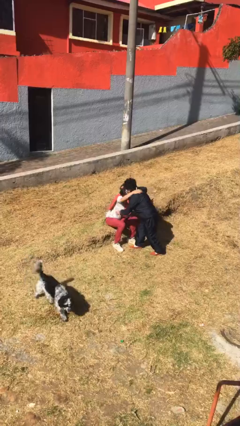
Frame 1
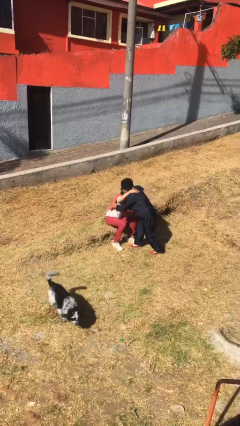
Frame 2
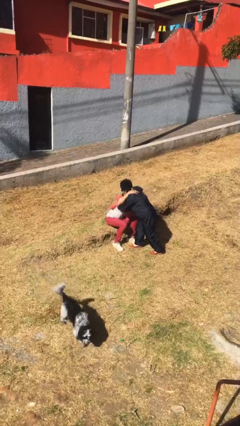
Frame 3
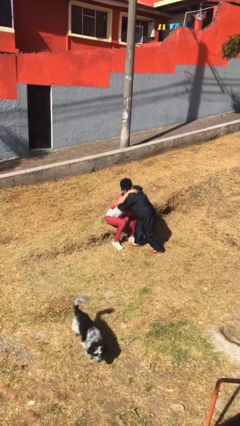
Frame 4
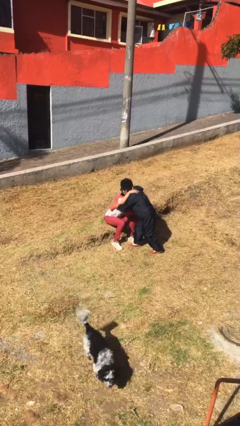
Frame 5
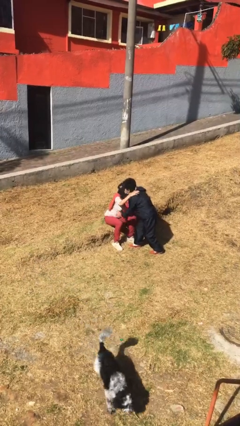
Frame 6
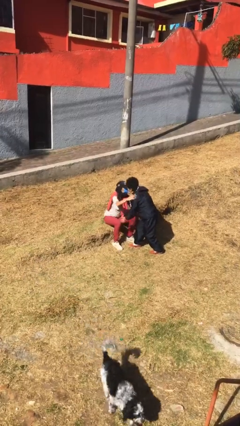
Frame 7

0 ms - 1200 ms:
person embraces person

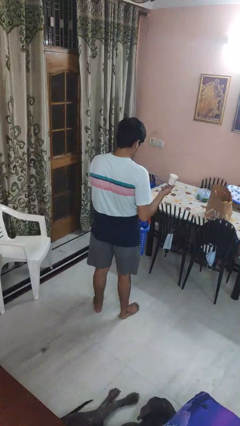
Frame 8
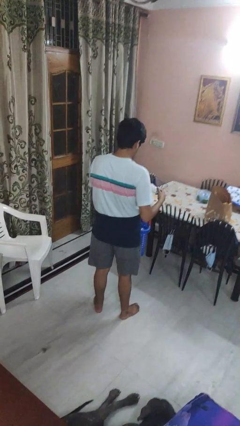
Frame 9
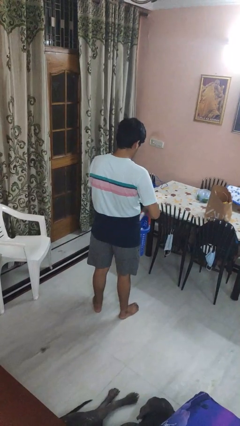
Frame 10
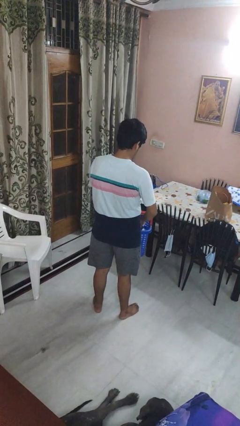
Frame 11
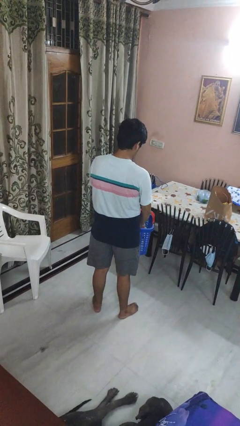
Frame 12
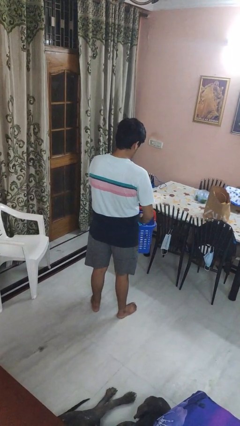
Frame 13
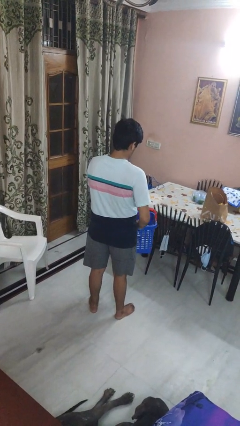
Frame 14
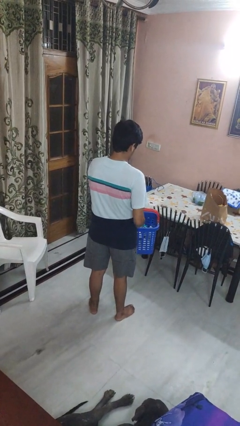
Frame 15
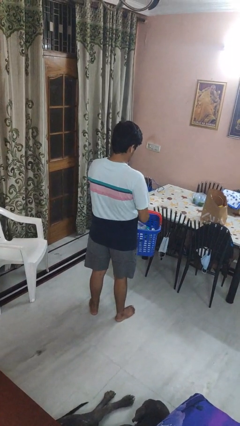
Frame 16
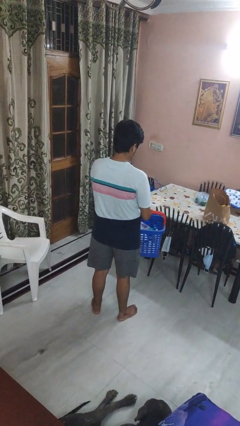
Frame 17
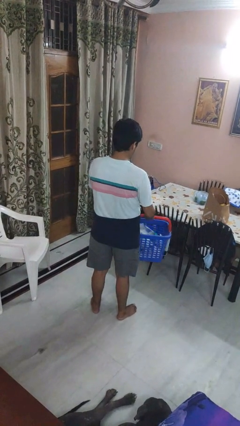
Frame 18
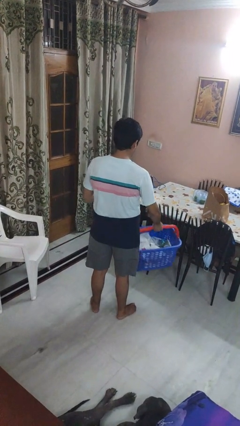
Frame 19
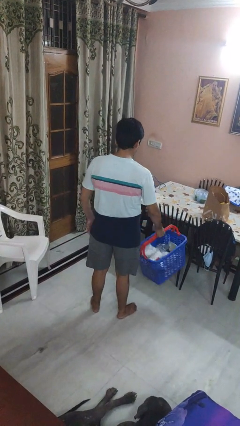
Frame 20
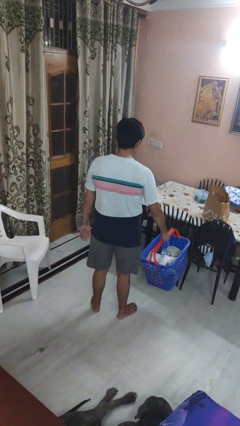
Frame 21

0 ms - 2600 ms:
person puts object into basket

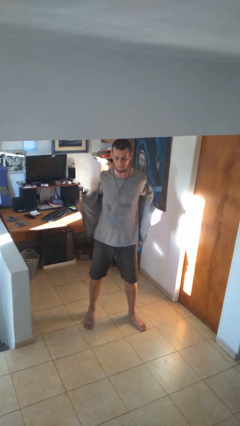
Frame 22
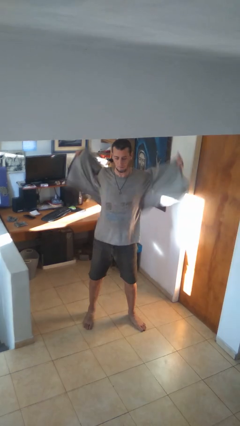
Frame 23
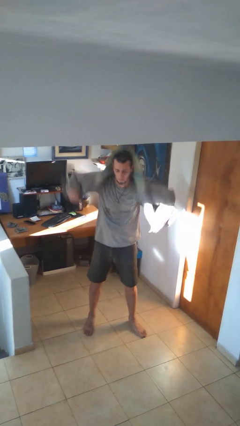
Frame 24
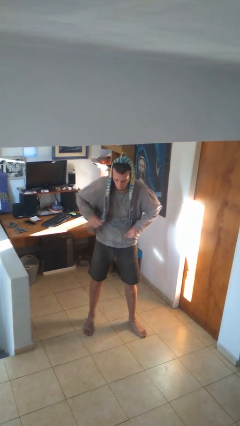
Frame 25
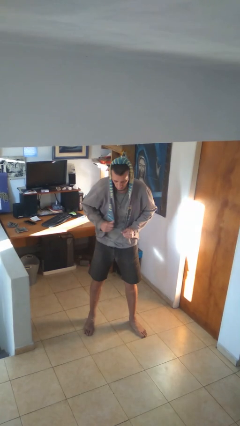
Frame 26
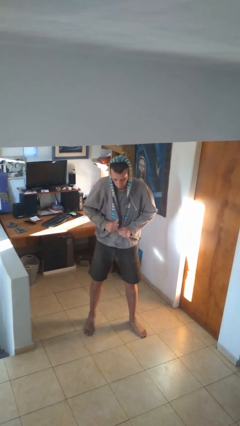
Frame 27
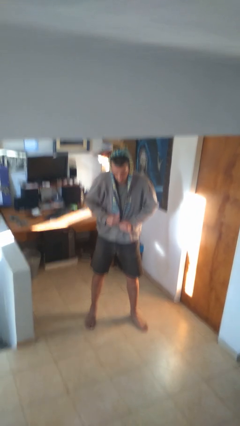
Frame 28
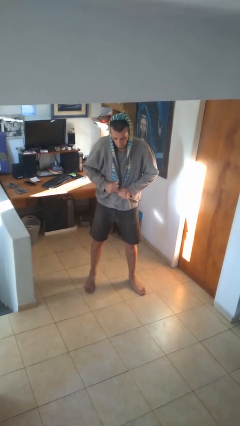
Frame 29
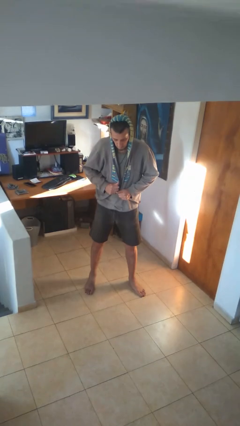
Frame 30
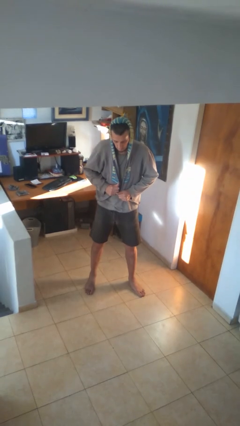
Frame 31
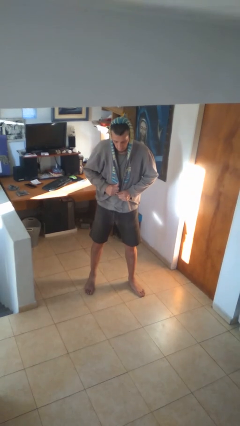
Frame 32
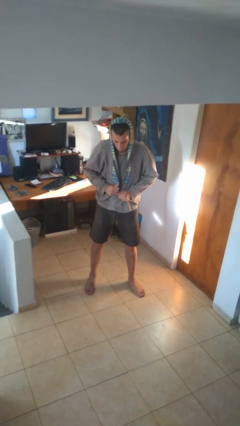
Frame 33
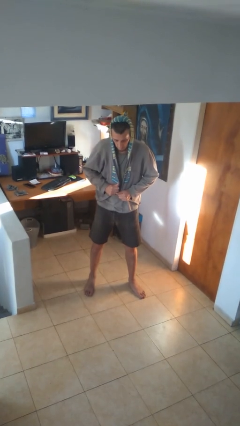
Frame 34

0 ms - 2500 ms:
person puts on hoodie

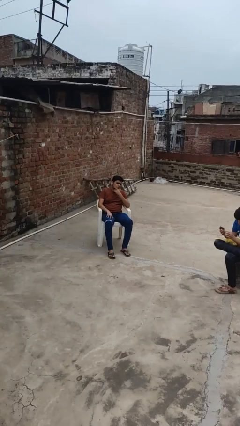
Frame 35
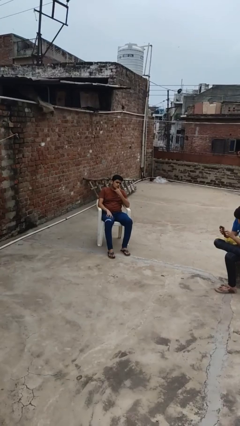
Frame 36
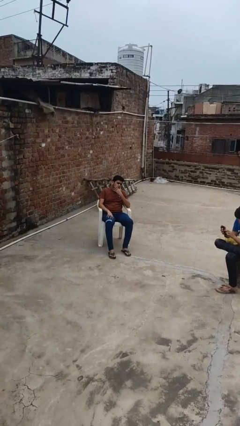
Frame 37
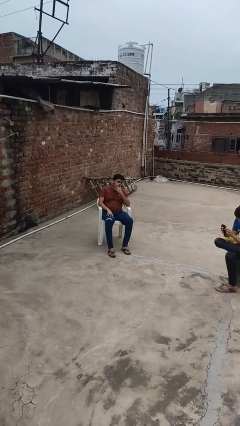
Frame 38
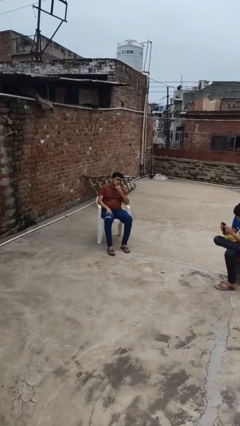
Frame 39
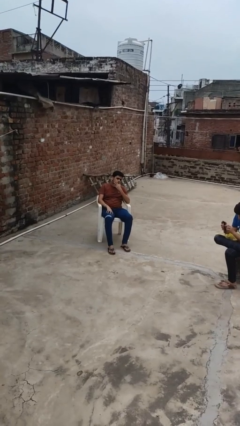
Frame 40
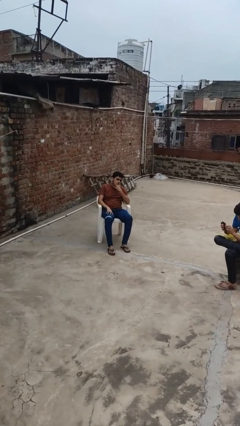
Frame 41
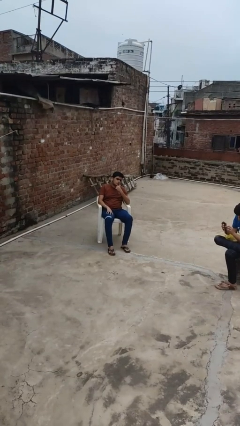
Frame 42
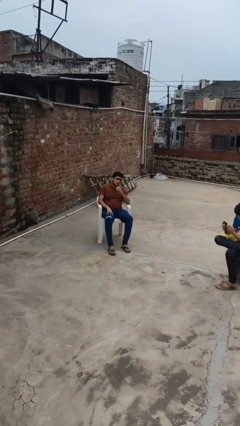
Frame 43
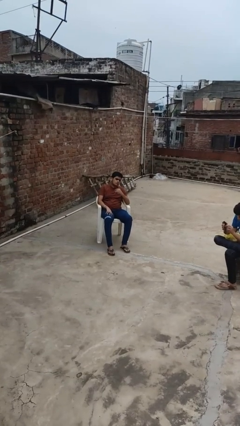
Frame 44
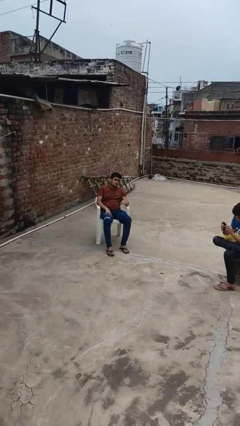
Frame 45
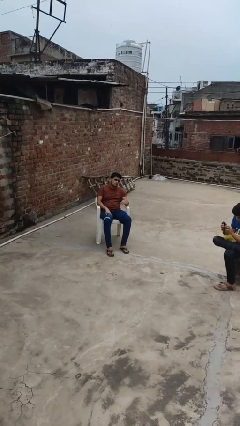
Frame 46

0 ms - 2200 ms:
person strokes chin

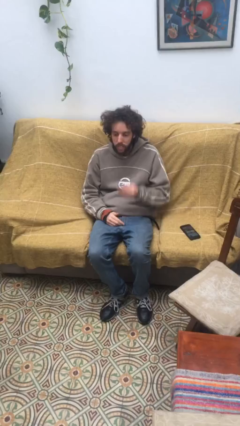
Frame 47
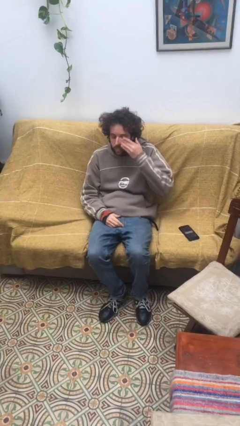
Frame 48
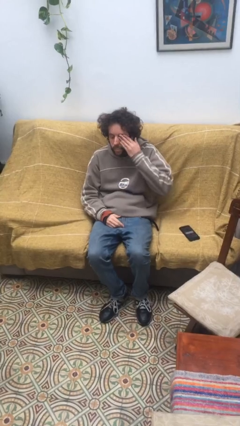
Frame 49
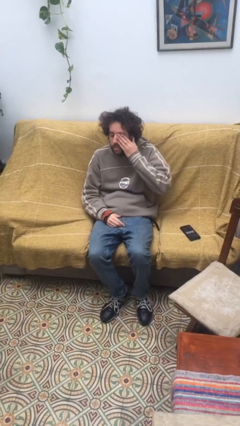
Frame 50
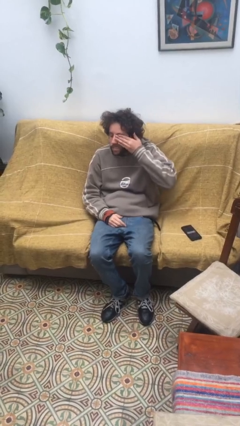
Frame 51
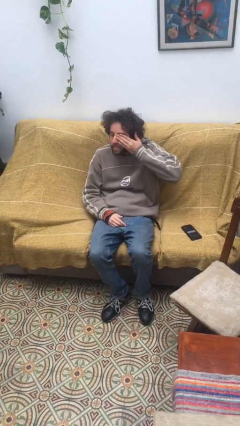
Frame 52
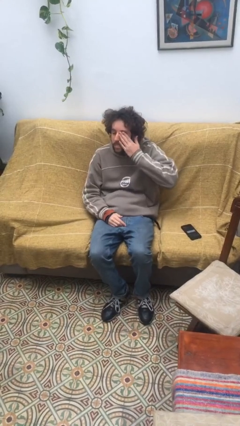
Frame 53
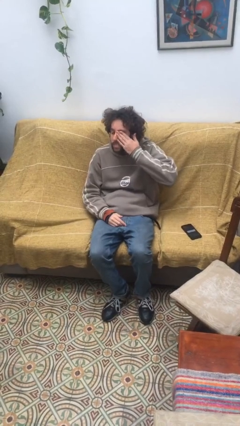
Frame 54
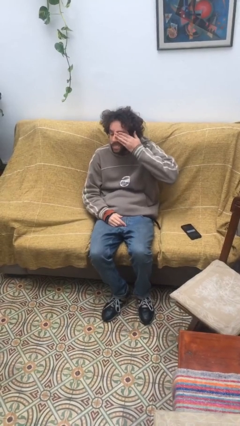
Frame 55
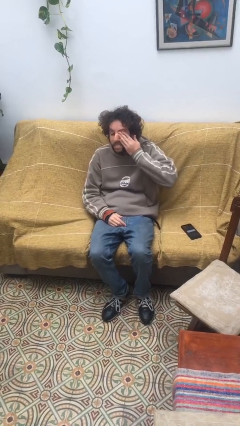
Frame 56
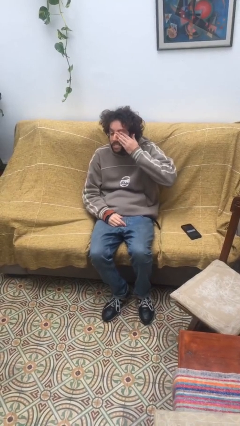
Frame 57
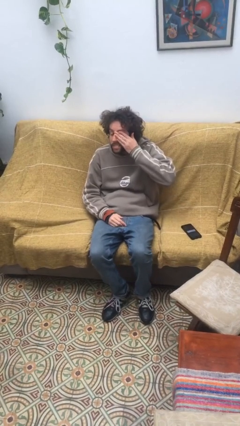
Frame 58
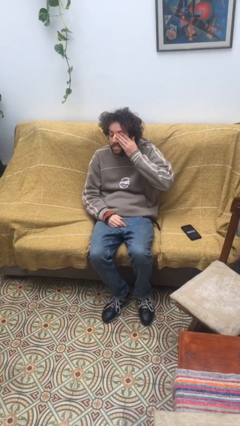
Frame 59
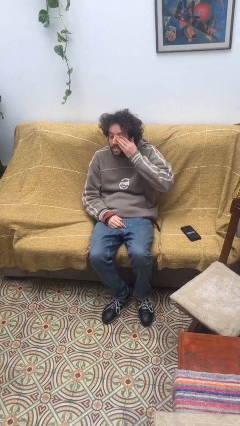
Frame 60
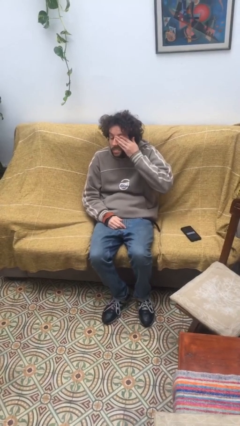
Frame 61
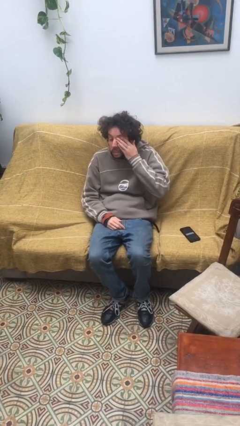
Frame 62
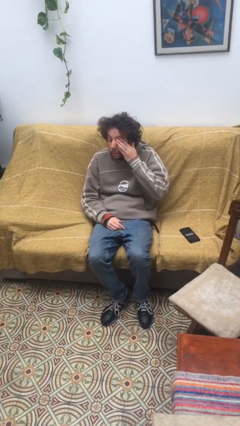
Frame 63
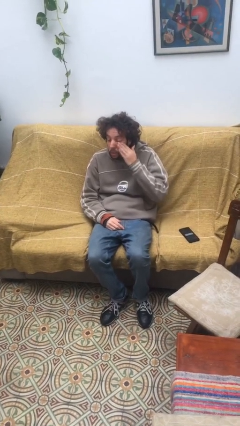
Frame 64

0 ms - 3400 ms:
person rubs eyes

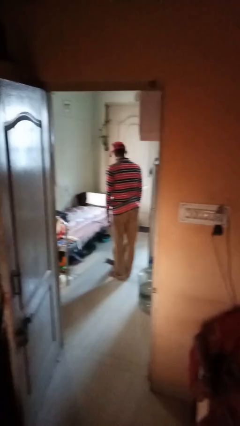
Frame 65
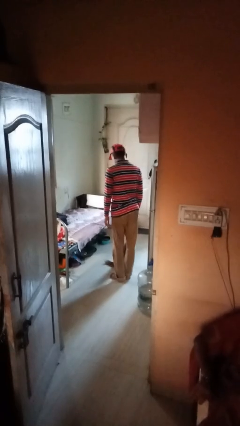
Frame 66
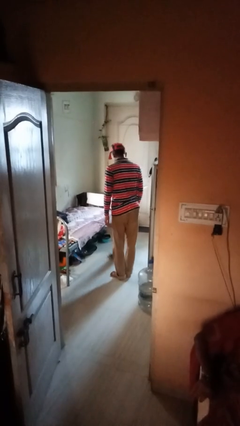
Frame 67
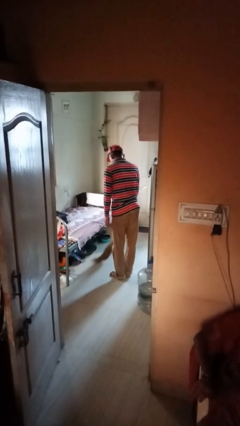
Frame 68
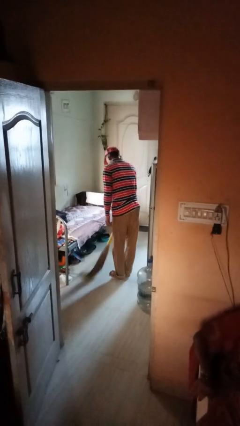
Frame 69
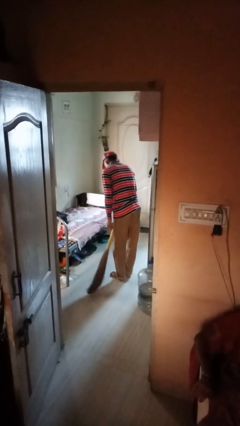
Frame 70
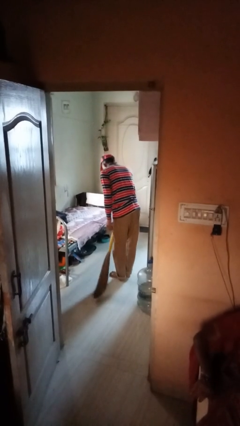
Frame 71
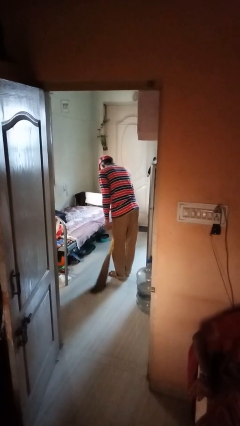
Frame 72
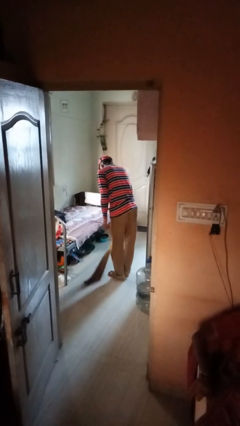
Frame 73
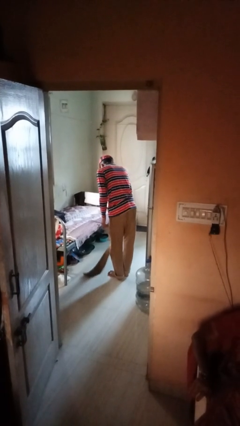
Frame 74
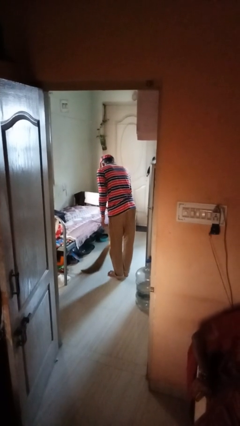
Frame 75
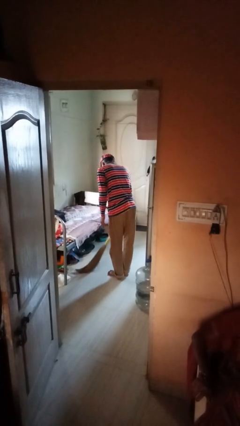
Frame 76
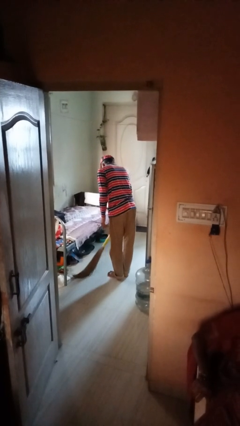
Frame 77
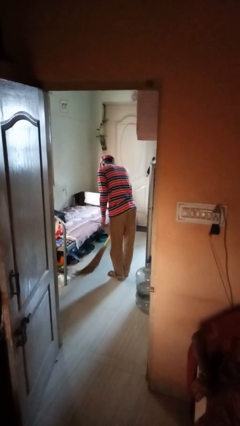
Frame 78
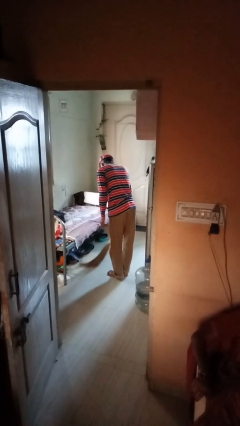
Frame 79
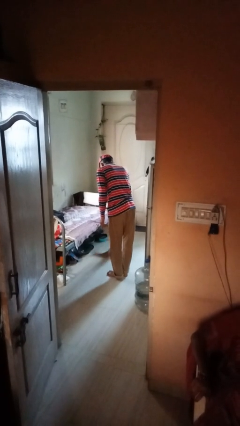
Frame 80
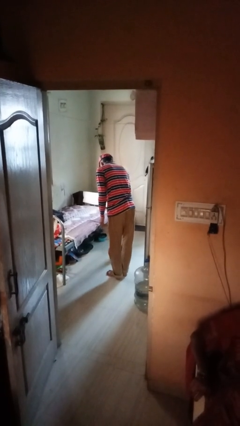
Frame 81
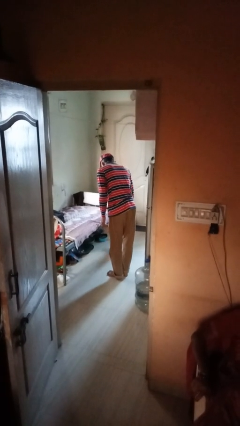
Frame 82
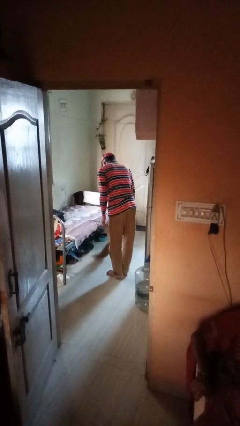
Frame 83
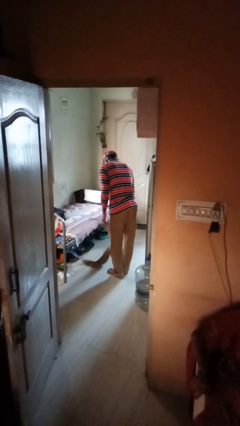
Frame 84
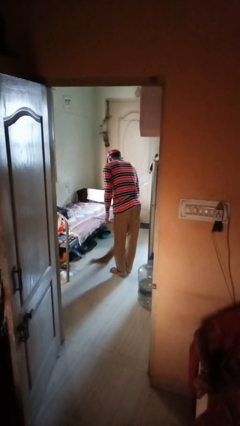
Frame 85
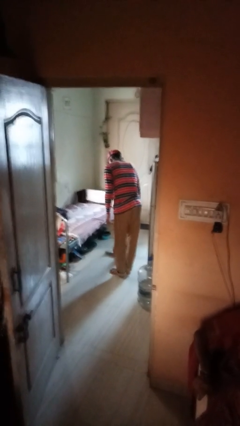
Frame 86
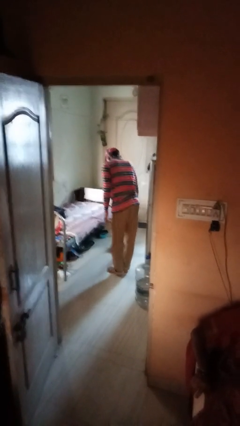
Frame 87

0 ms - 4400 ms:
person sweeps floor

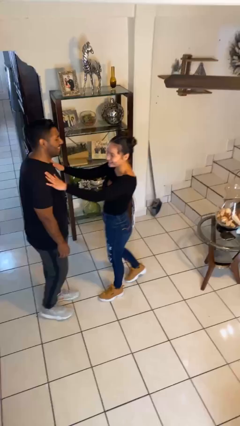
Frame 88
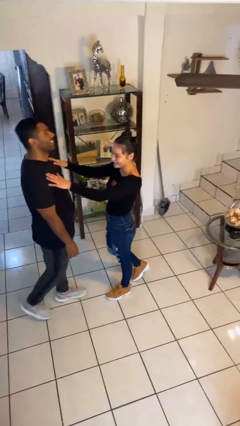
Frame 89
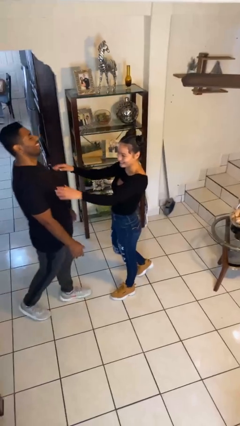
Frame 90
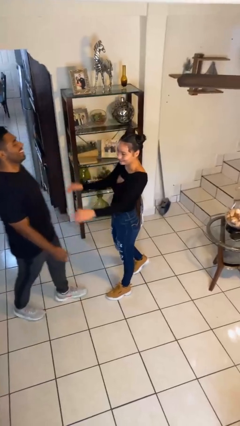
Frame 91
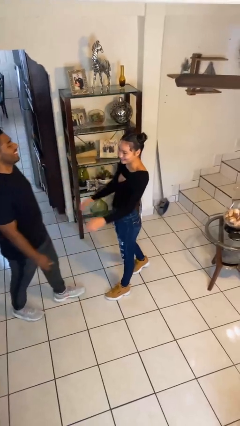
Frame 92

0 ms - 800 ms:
person shoves person

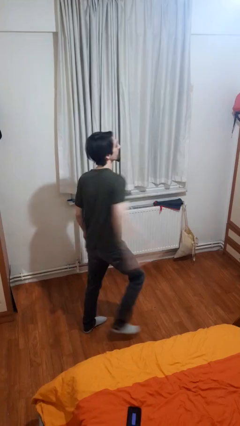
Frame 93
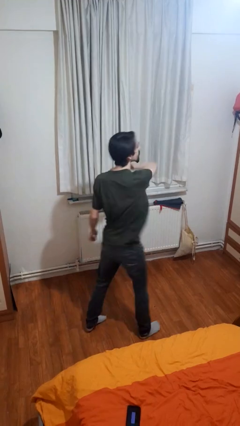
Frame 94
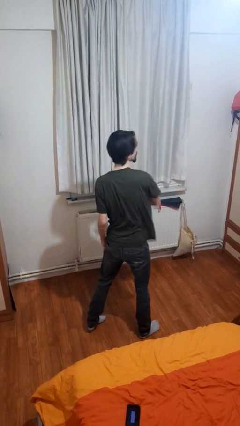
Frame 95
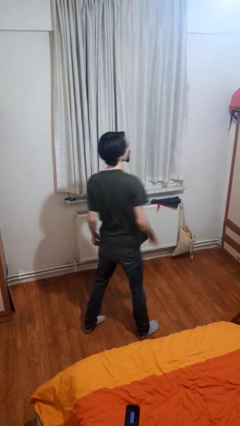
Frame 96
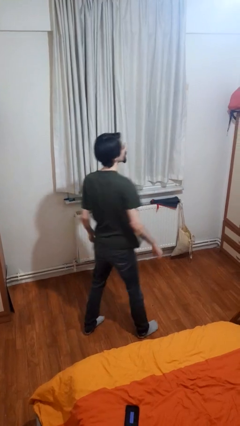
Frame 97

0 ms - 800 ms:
person punches
